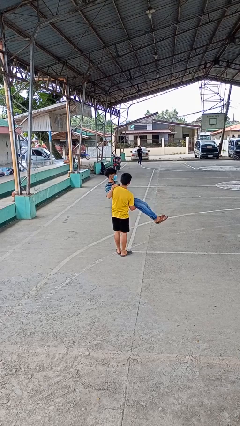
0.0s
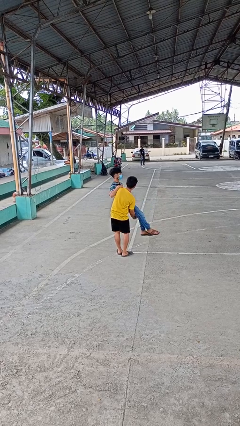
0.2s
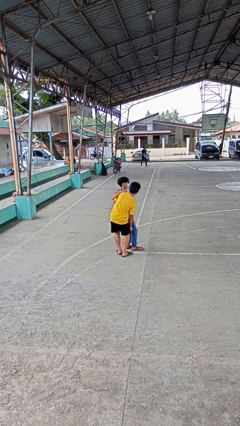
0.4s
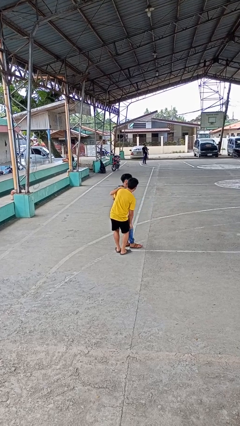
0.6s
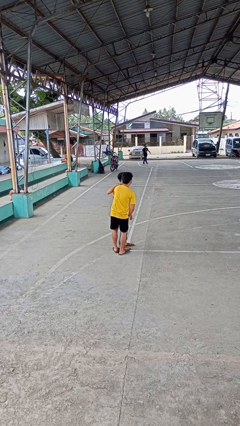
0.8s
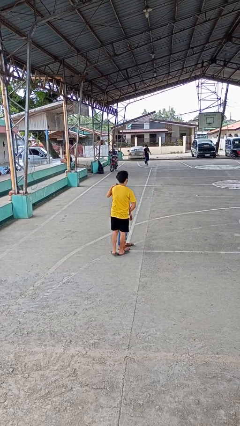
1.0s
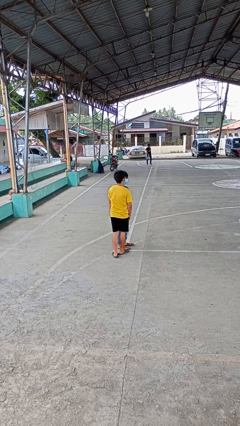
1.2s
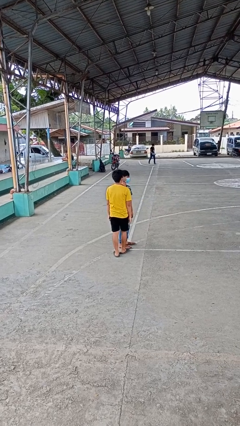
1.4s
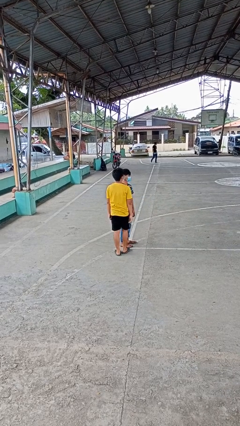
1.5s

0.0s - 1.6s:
person puts down person

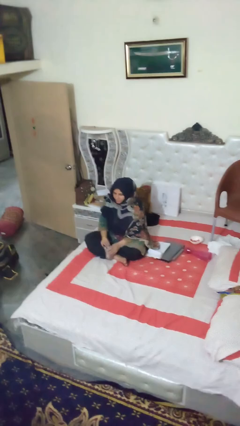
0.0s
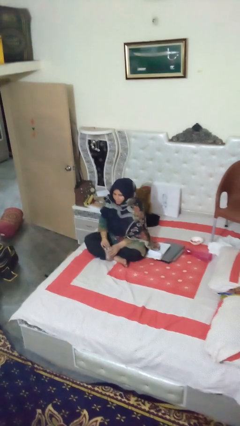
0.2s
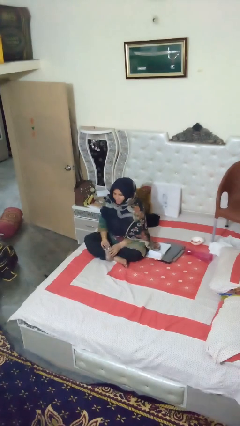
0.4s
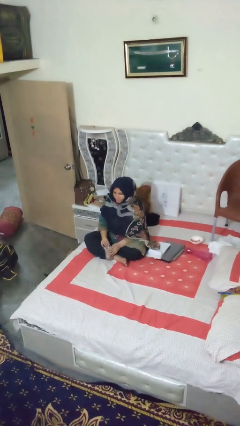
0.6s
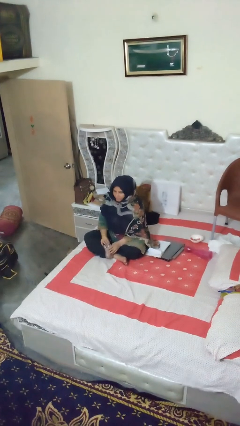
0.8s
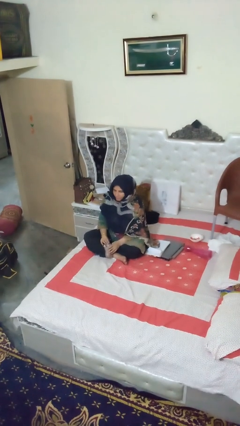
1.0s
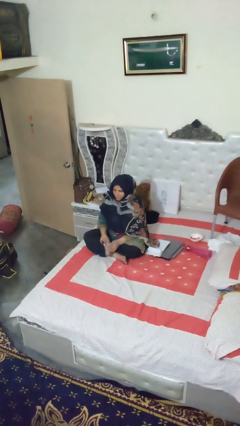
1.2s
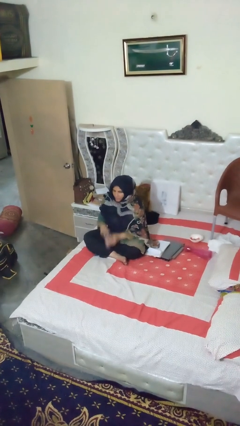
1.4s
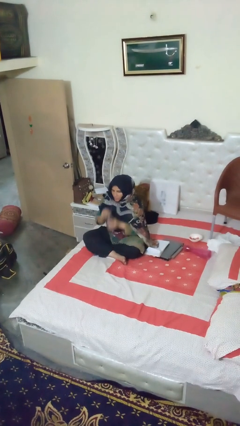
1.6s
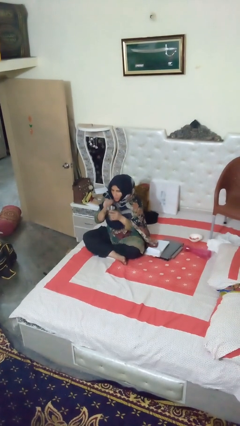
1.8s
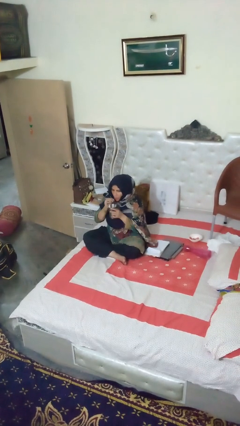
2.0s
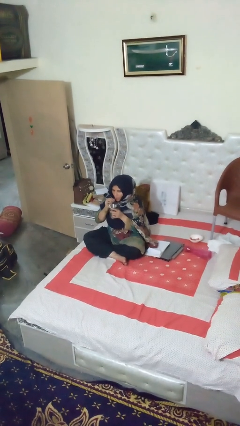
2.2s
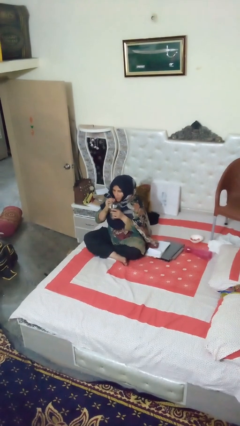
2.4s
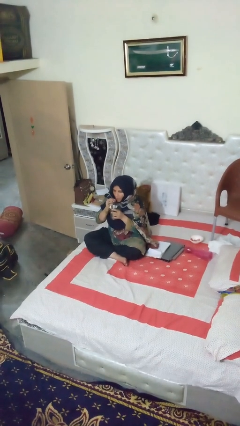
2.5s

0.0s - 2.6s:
person drinks from straw

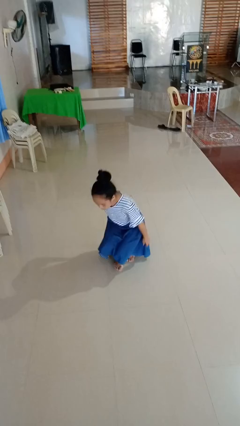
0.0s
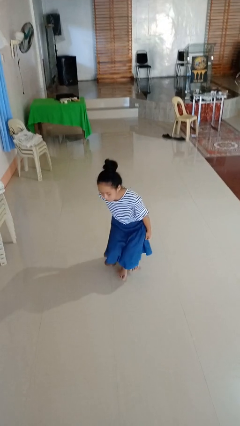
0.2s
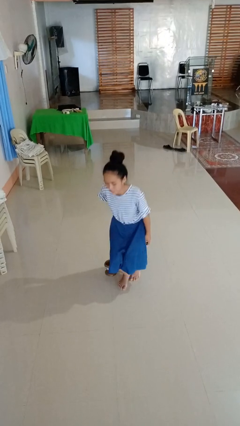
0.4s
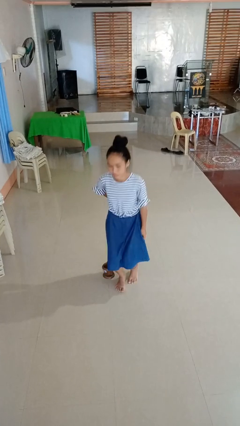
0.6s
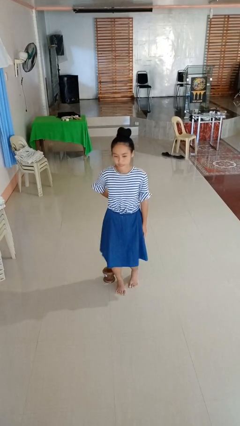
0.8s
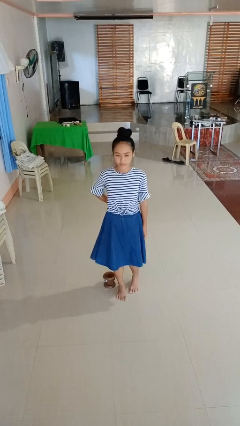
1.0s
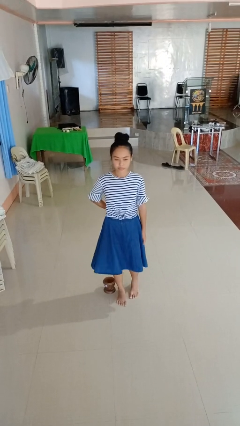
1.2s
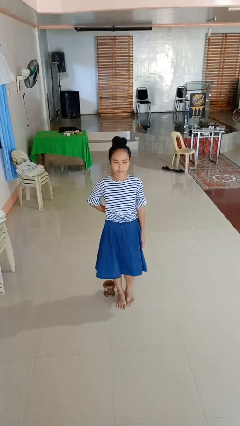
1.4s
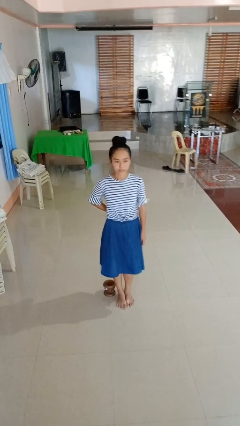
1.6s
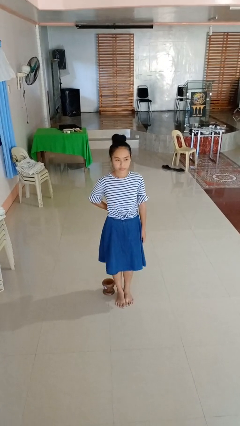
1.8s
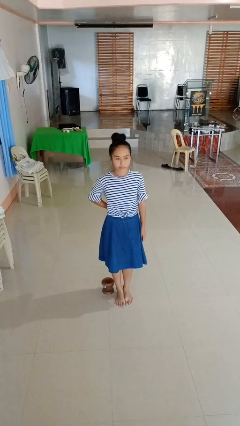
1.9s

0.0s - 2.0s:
person stands up from floor

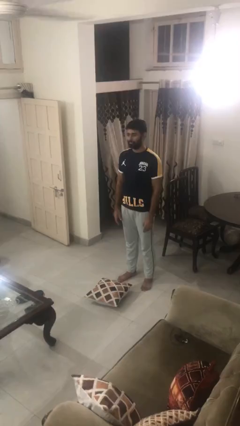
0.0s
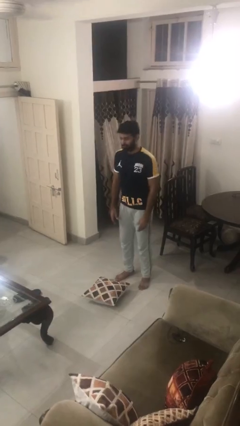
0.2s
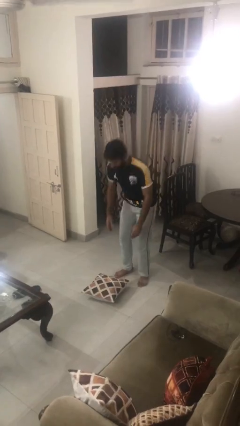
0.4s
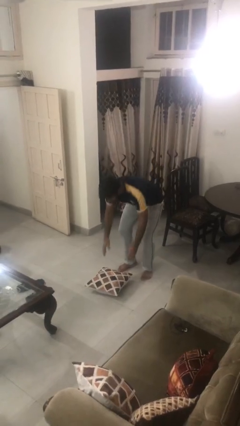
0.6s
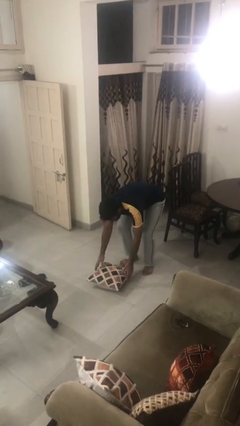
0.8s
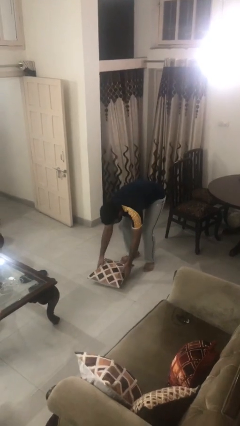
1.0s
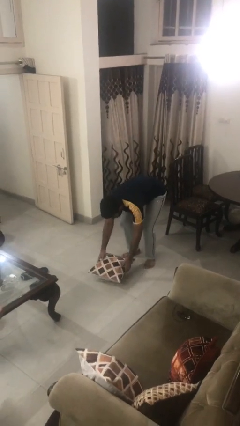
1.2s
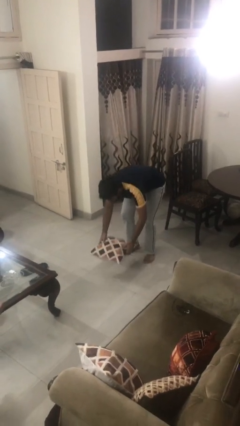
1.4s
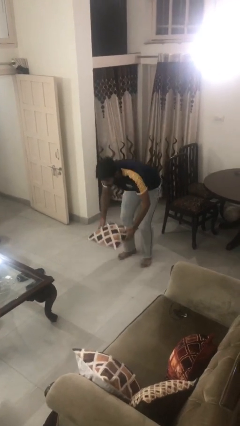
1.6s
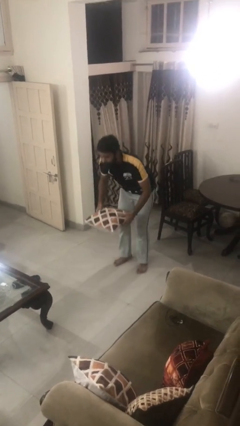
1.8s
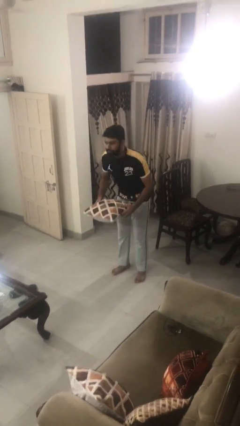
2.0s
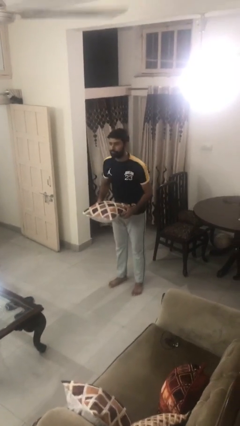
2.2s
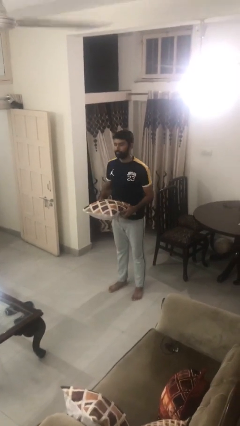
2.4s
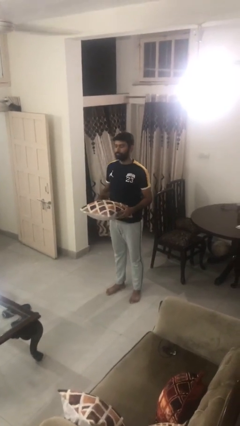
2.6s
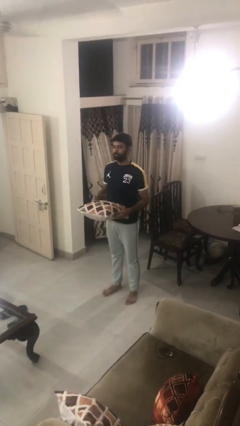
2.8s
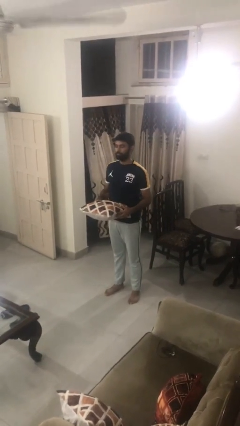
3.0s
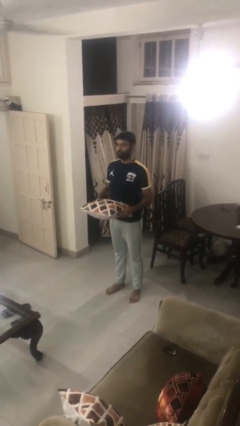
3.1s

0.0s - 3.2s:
person picks up object from floor

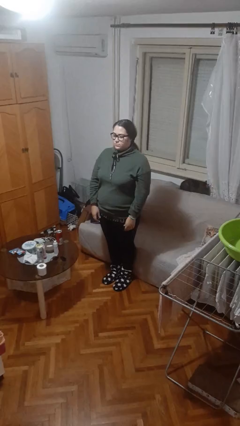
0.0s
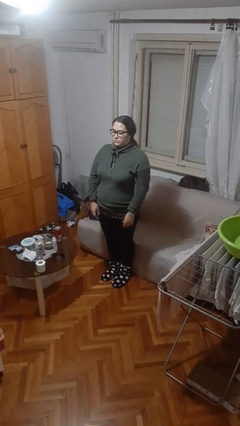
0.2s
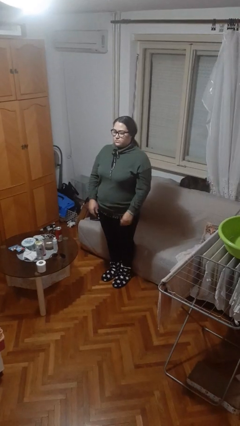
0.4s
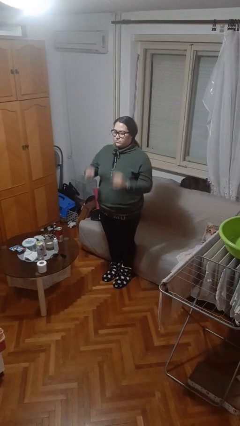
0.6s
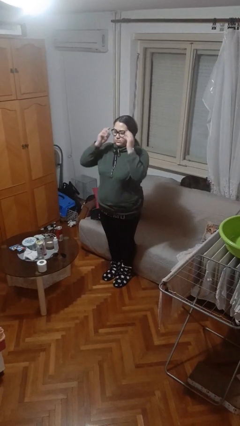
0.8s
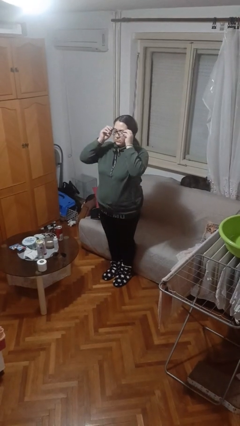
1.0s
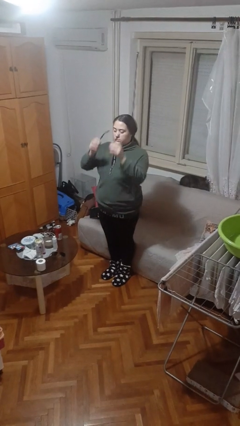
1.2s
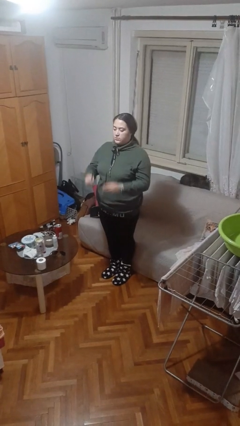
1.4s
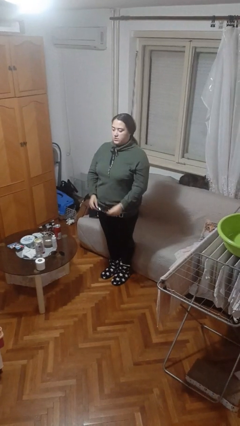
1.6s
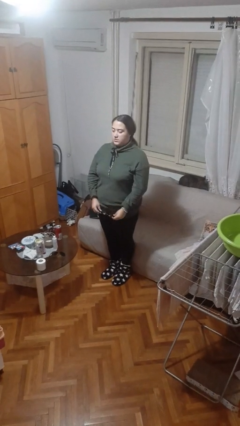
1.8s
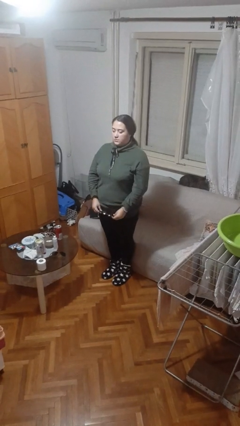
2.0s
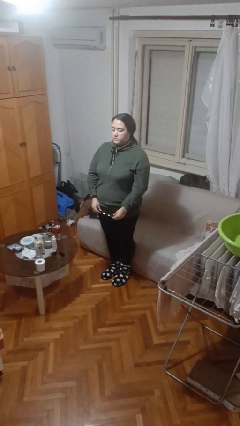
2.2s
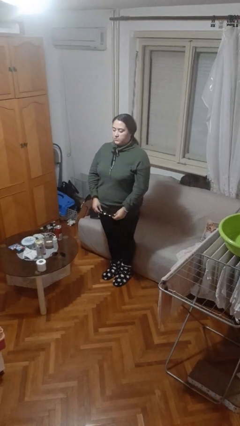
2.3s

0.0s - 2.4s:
person takes off glasses

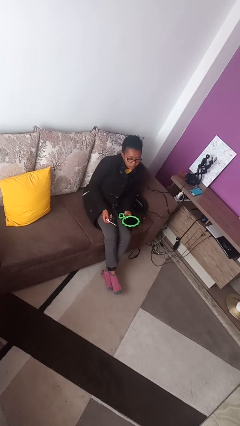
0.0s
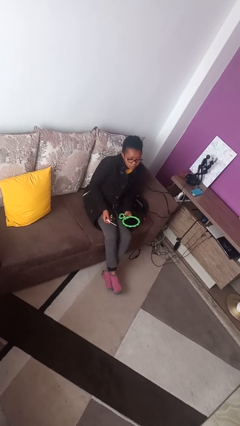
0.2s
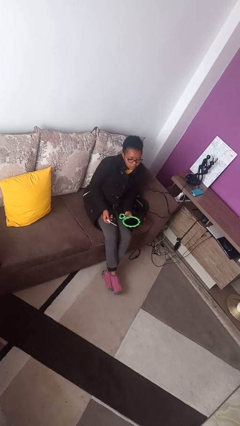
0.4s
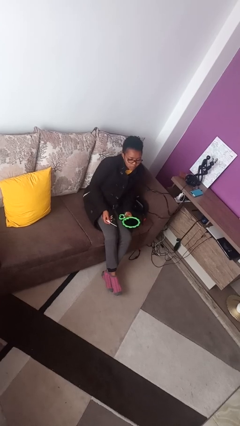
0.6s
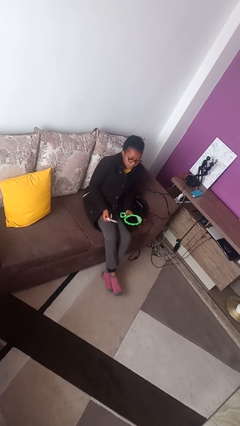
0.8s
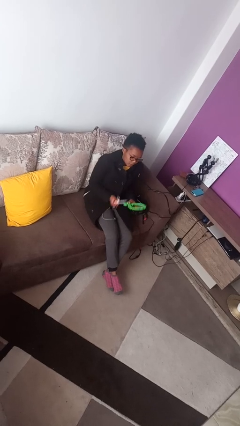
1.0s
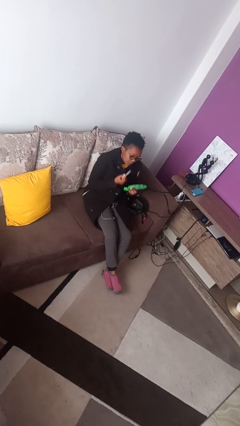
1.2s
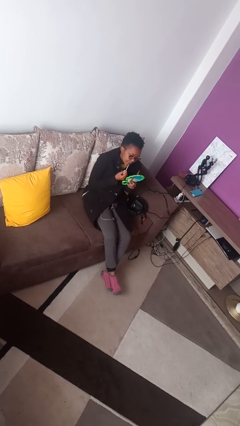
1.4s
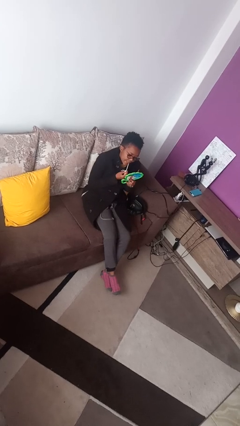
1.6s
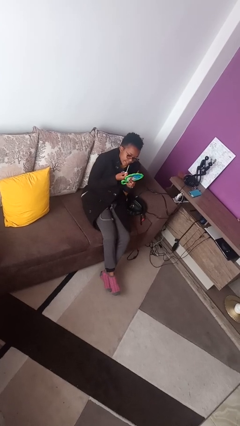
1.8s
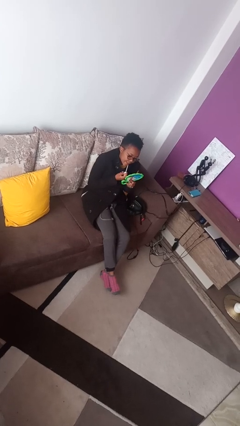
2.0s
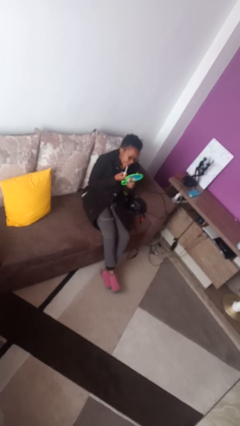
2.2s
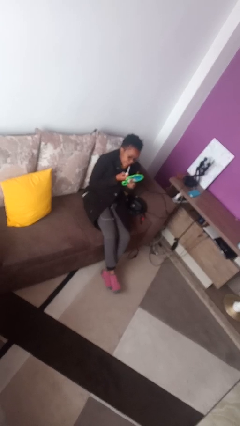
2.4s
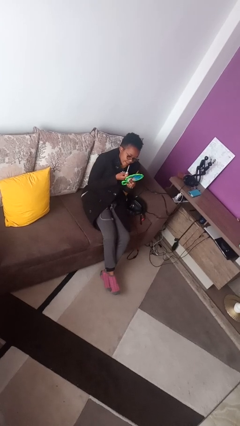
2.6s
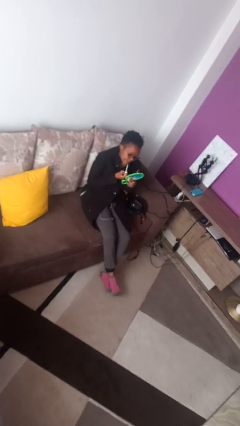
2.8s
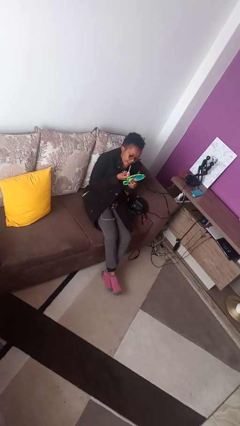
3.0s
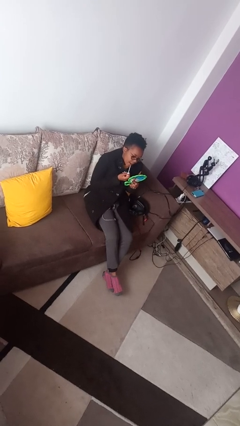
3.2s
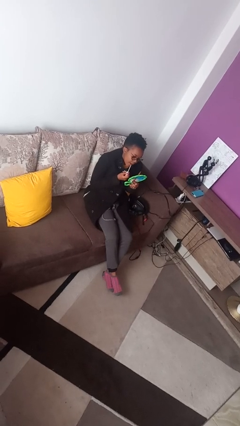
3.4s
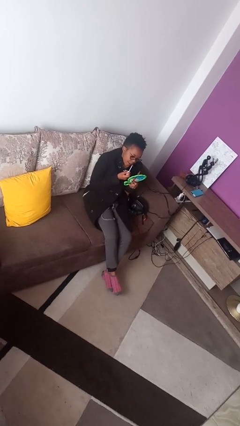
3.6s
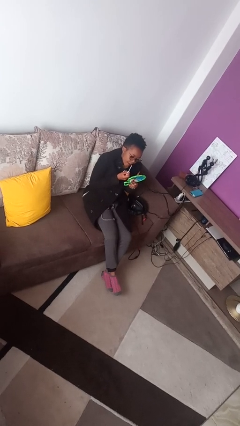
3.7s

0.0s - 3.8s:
person applies lip makeup

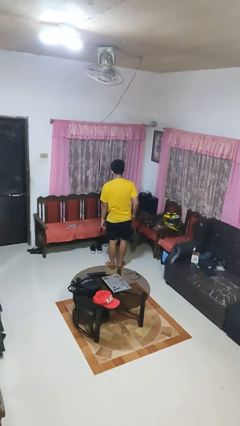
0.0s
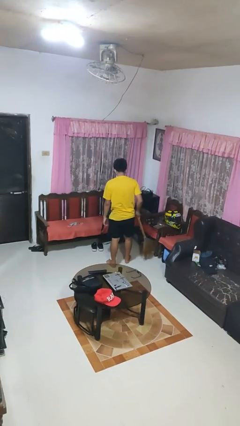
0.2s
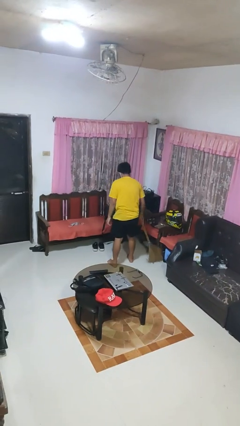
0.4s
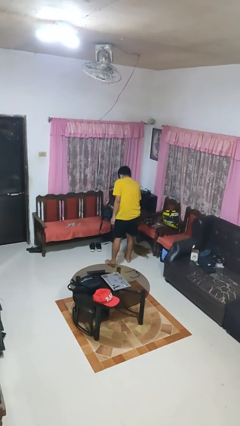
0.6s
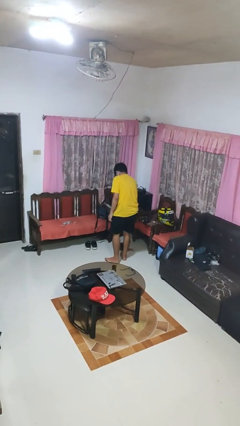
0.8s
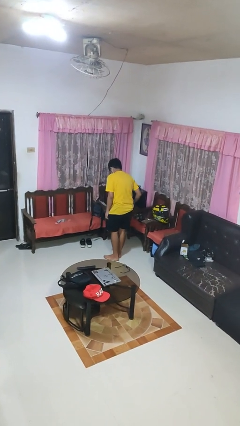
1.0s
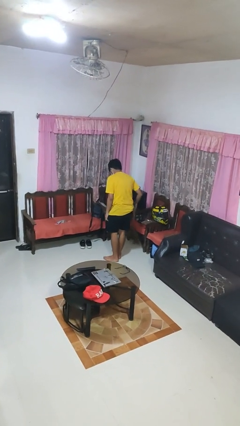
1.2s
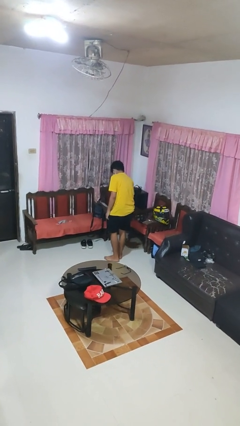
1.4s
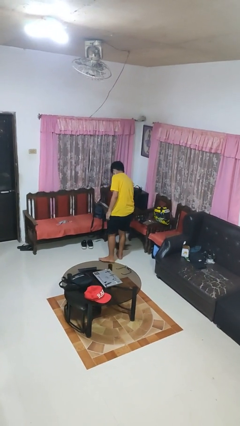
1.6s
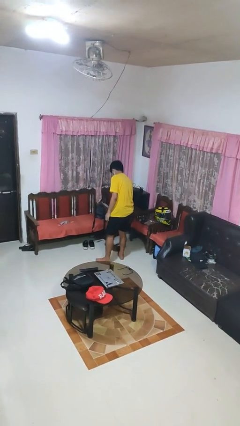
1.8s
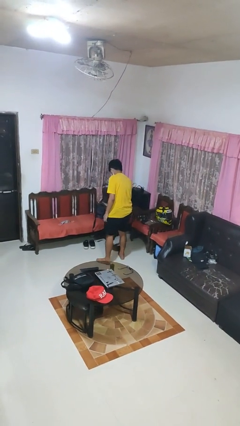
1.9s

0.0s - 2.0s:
person sweeps floor
